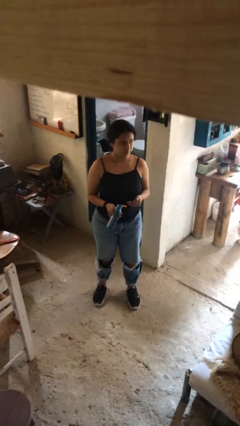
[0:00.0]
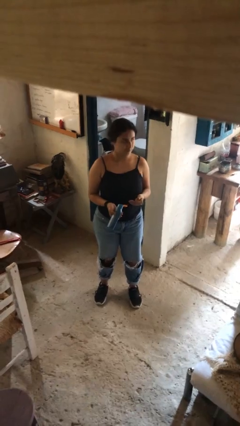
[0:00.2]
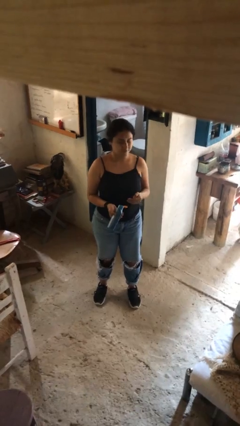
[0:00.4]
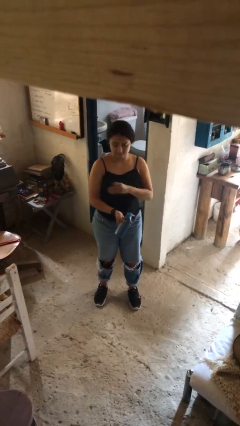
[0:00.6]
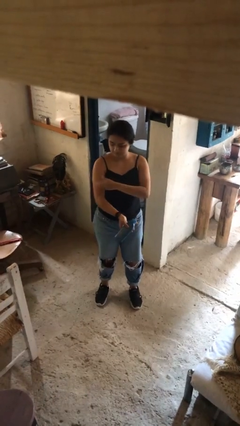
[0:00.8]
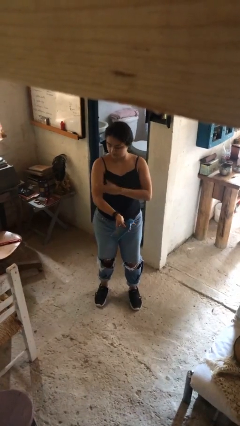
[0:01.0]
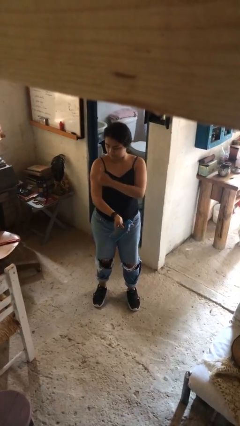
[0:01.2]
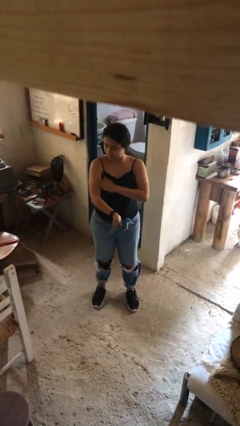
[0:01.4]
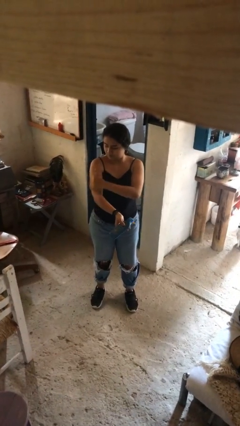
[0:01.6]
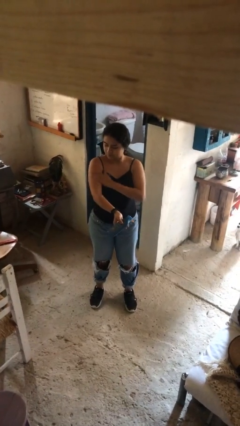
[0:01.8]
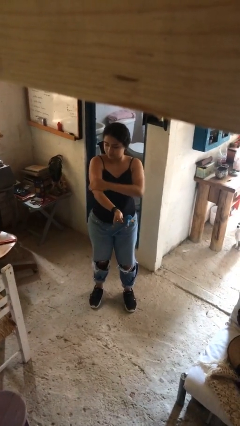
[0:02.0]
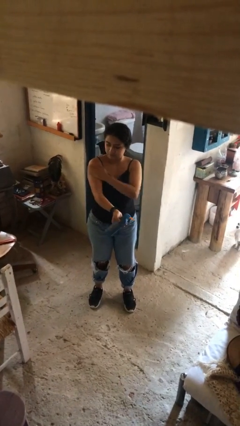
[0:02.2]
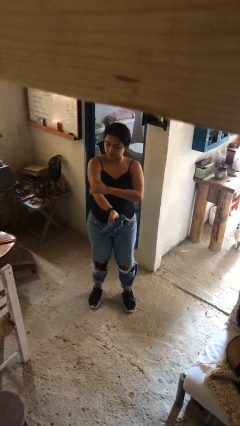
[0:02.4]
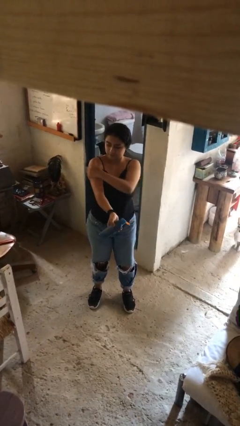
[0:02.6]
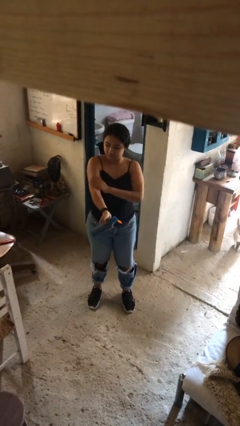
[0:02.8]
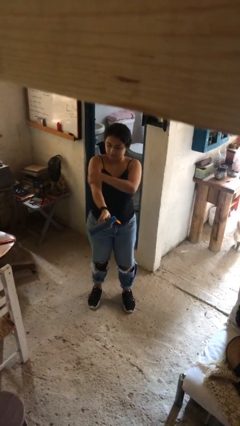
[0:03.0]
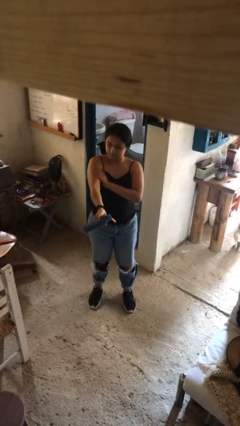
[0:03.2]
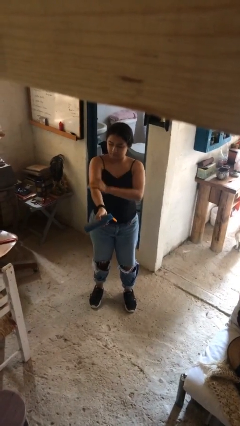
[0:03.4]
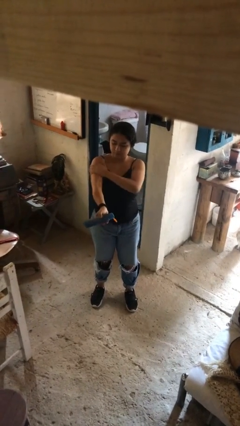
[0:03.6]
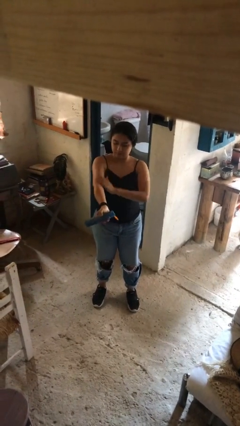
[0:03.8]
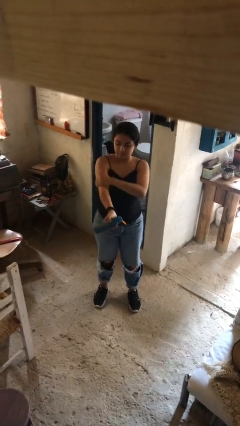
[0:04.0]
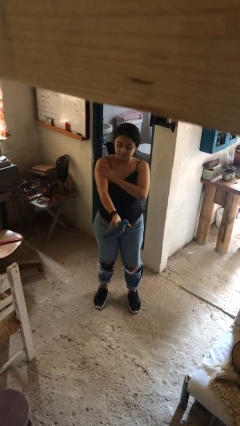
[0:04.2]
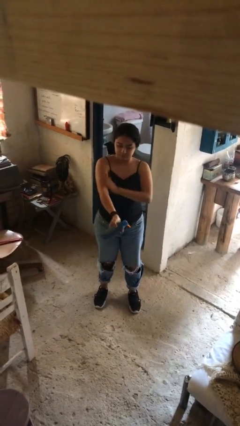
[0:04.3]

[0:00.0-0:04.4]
person applies sunscreen

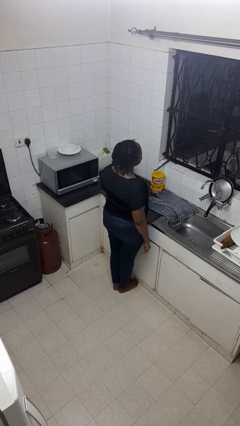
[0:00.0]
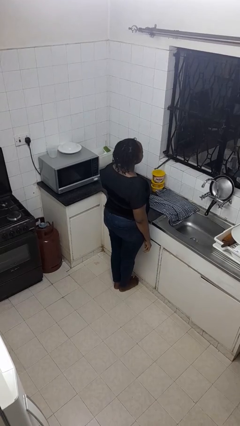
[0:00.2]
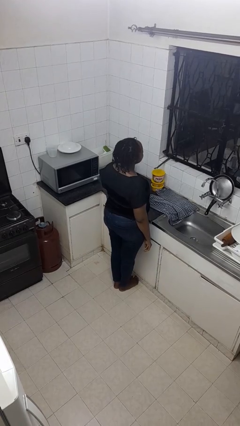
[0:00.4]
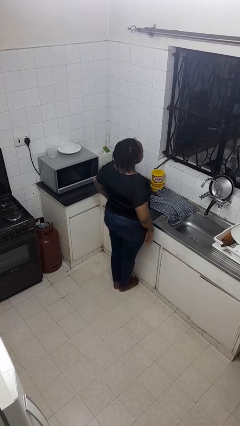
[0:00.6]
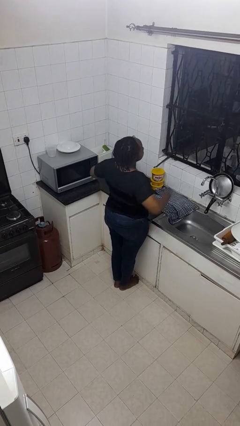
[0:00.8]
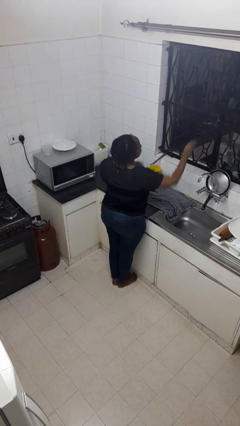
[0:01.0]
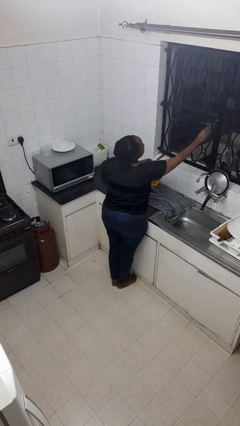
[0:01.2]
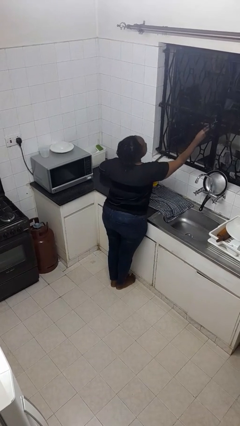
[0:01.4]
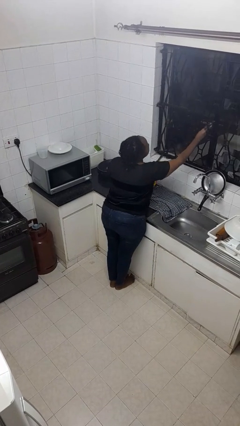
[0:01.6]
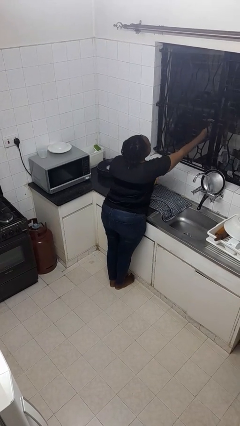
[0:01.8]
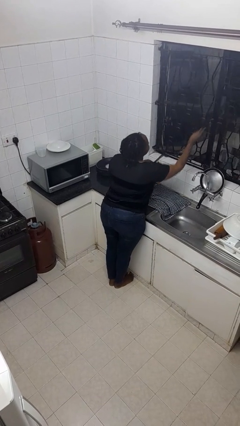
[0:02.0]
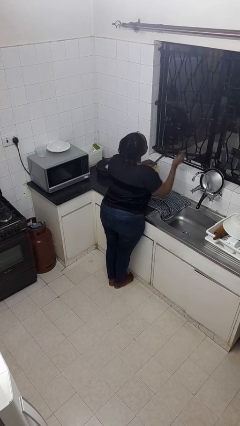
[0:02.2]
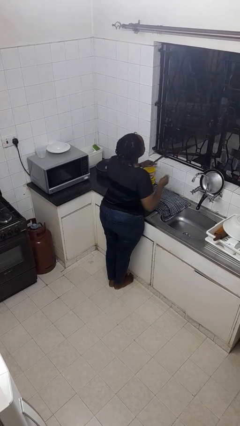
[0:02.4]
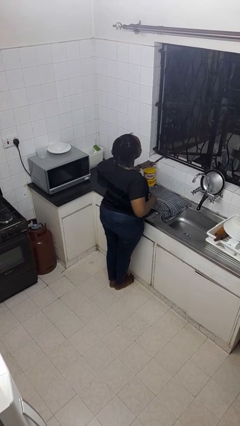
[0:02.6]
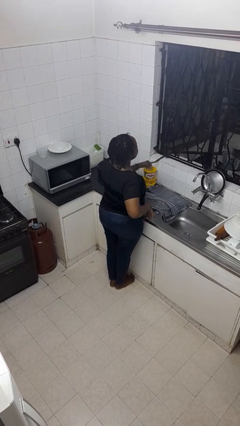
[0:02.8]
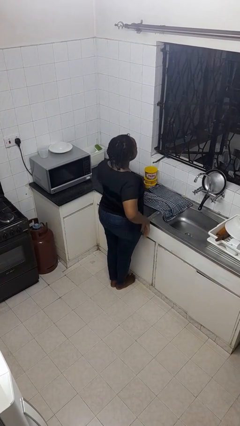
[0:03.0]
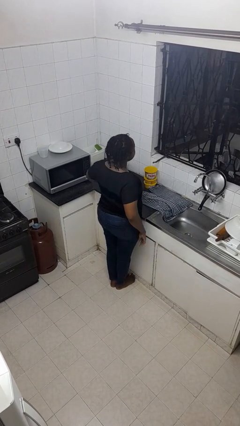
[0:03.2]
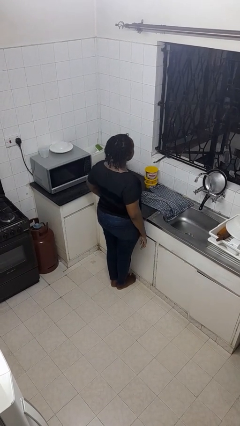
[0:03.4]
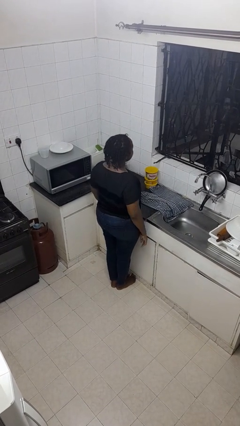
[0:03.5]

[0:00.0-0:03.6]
person opens home window

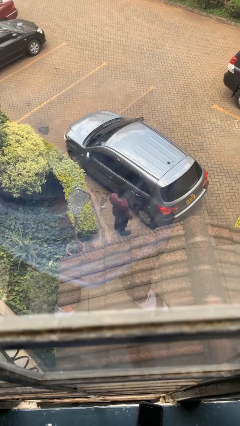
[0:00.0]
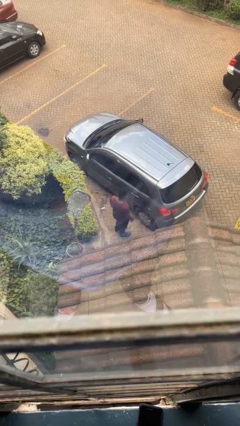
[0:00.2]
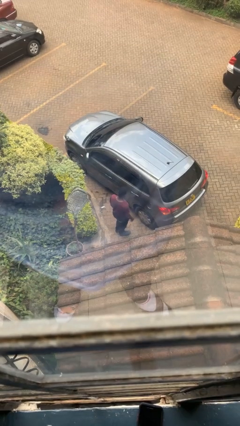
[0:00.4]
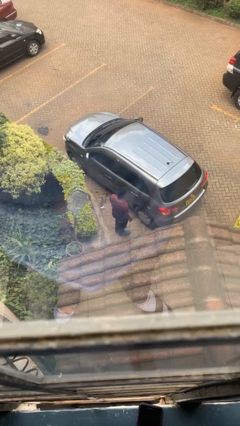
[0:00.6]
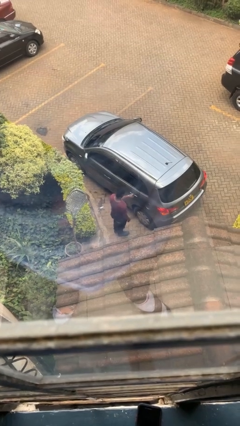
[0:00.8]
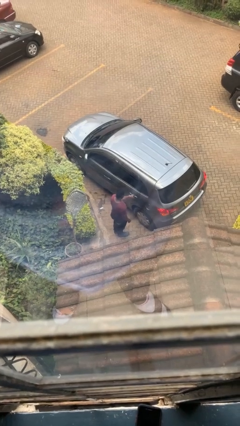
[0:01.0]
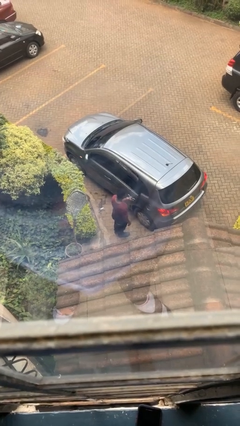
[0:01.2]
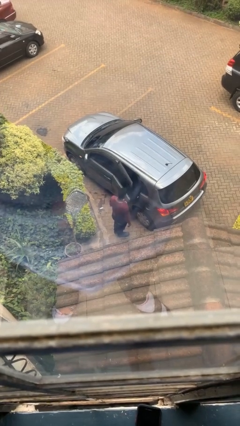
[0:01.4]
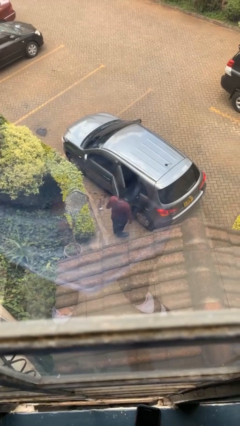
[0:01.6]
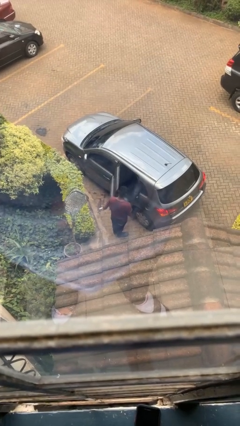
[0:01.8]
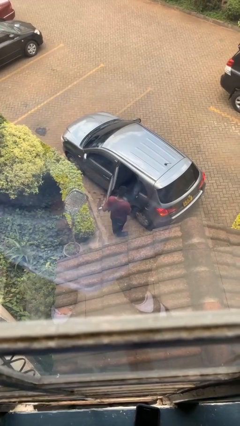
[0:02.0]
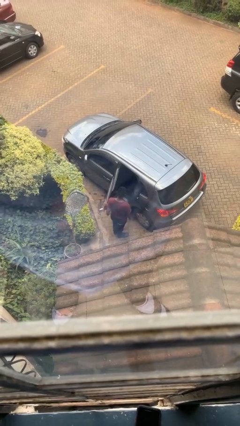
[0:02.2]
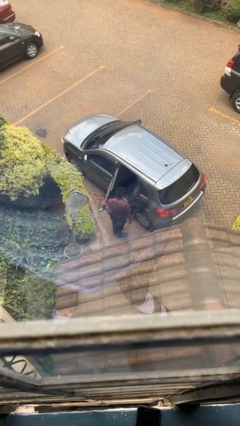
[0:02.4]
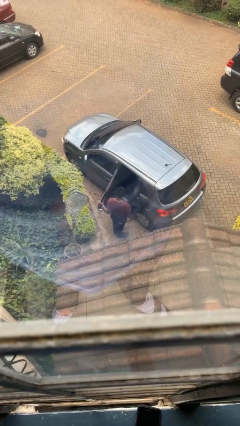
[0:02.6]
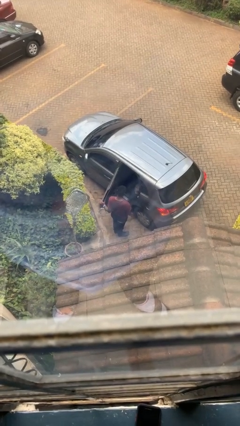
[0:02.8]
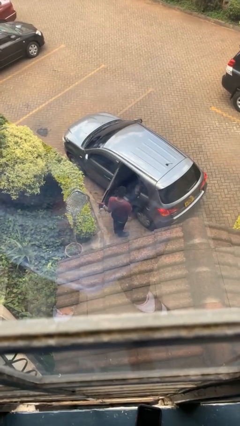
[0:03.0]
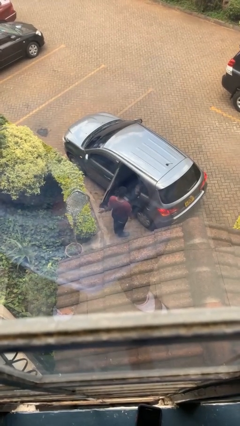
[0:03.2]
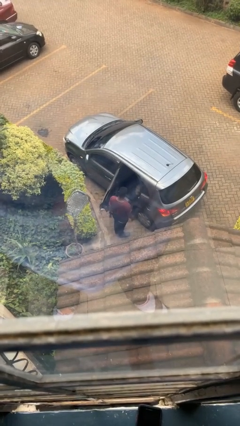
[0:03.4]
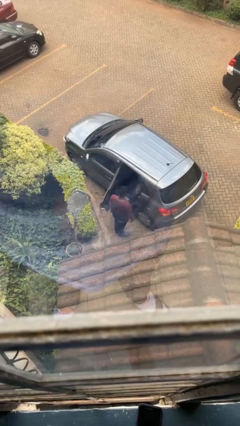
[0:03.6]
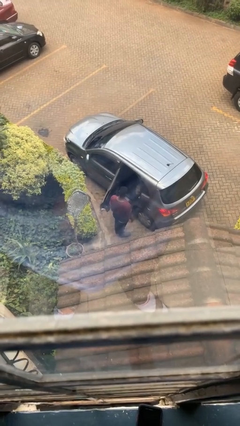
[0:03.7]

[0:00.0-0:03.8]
person opens car door

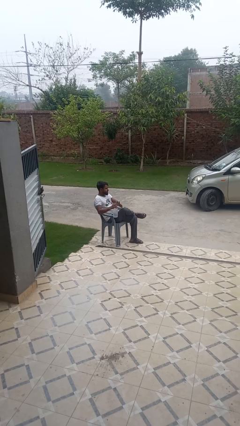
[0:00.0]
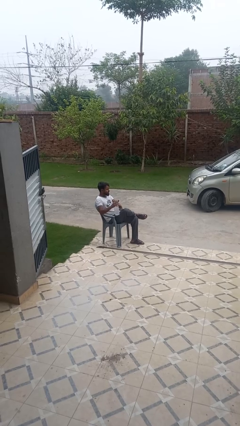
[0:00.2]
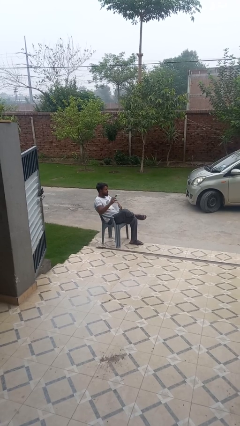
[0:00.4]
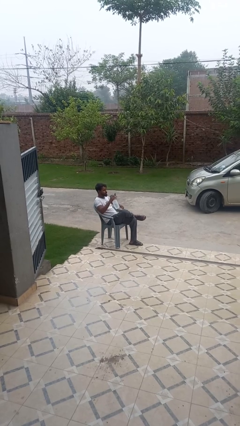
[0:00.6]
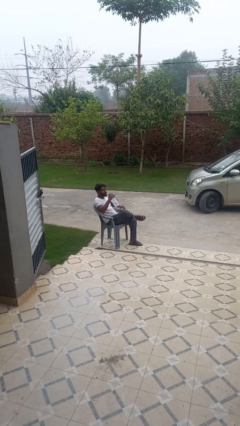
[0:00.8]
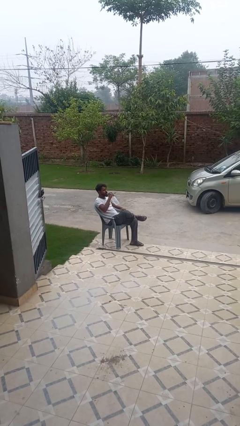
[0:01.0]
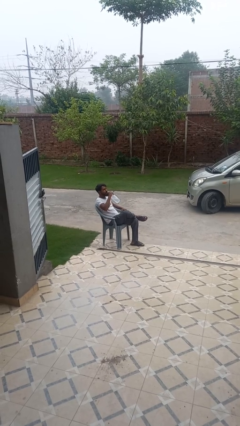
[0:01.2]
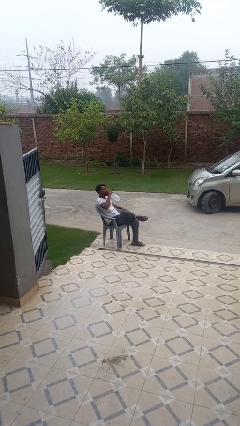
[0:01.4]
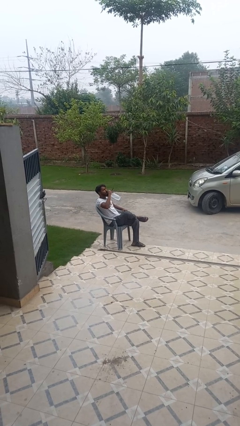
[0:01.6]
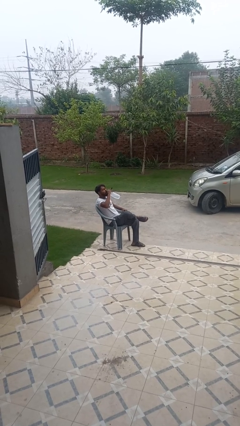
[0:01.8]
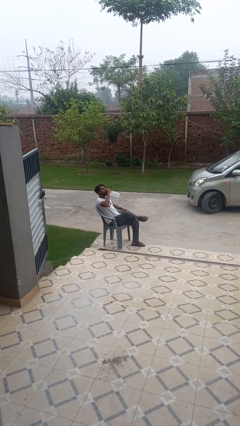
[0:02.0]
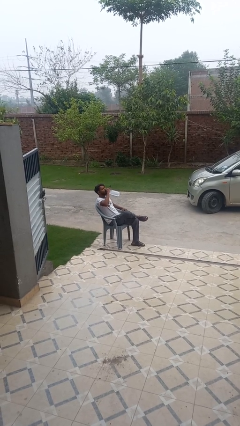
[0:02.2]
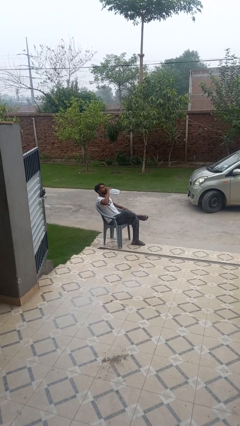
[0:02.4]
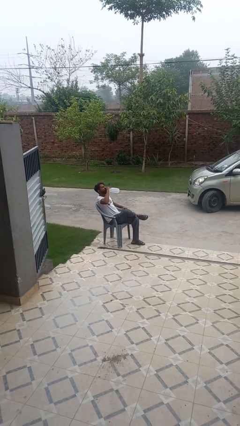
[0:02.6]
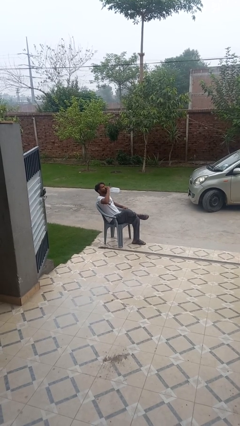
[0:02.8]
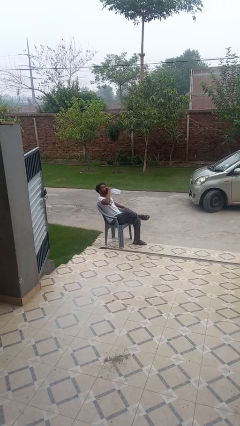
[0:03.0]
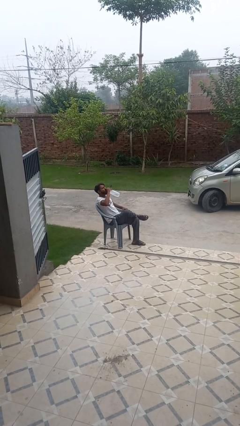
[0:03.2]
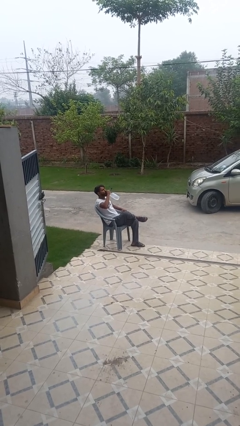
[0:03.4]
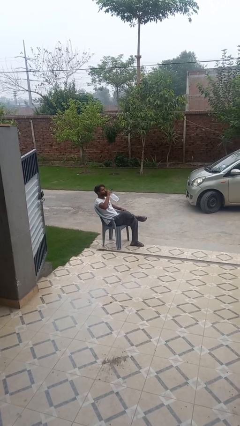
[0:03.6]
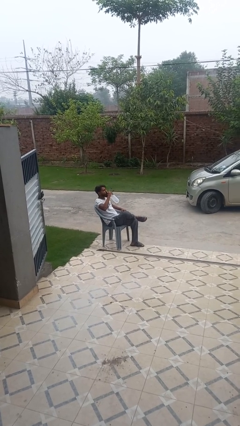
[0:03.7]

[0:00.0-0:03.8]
person drinks from bottle

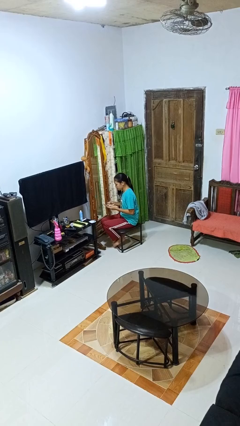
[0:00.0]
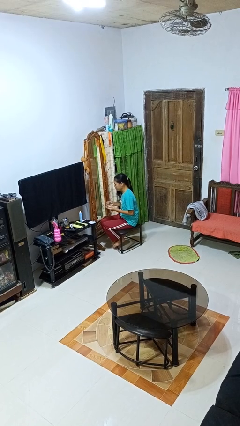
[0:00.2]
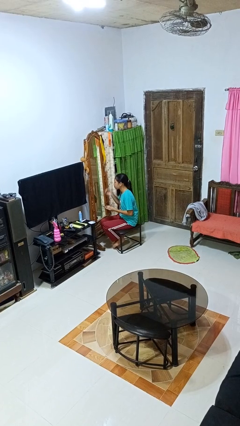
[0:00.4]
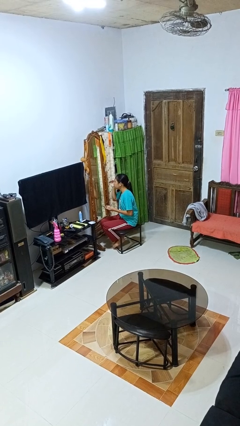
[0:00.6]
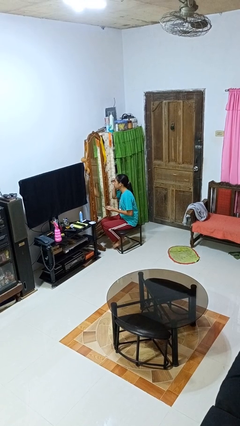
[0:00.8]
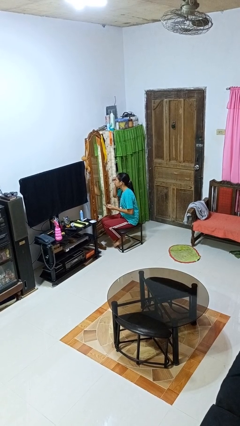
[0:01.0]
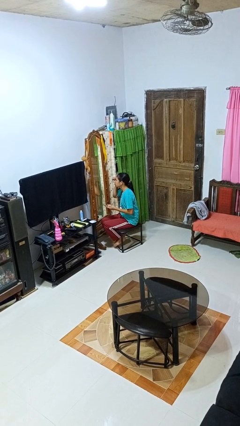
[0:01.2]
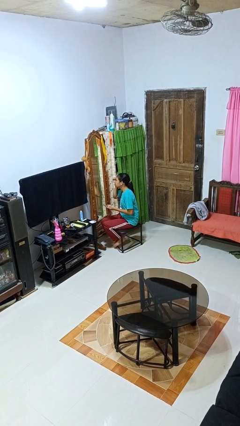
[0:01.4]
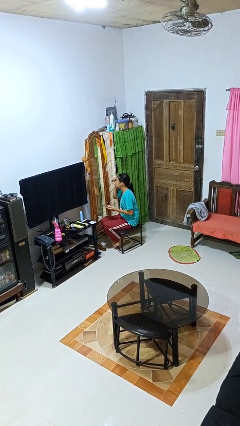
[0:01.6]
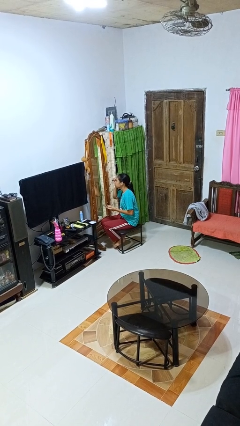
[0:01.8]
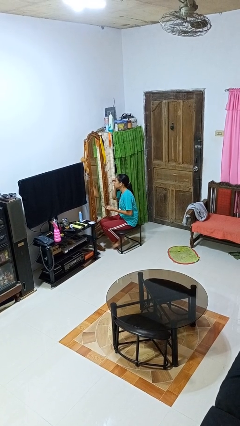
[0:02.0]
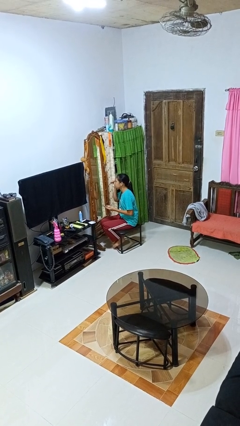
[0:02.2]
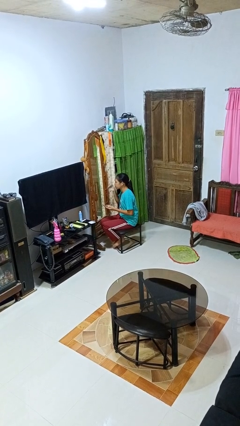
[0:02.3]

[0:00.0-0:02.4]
person applies eye makeup
